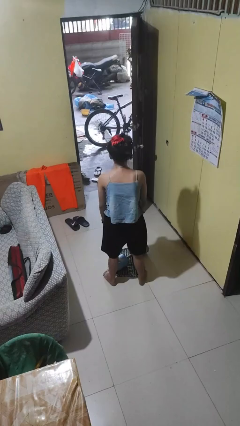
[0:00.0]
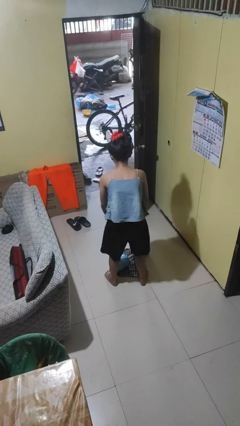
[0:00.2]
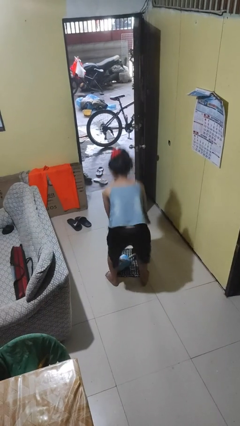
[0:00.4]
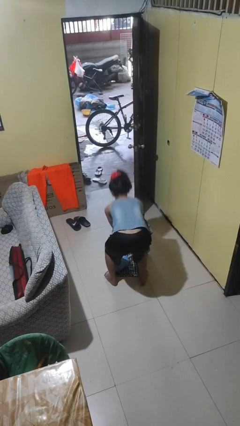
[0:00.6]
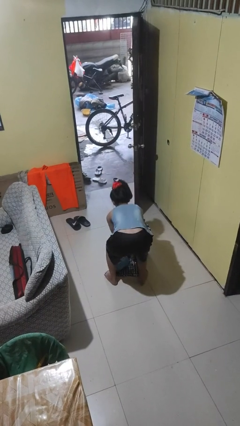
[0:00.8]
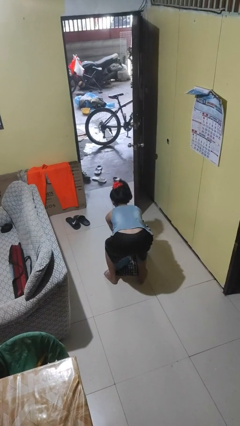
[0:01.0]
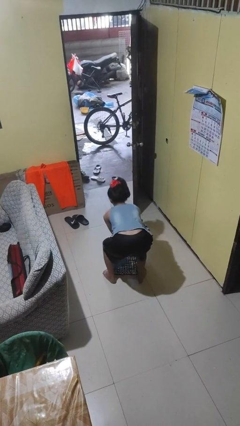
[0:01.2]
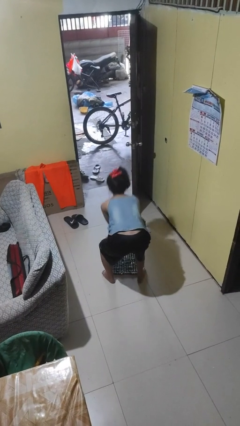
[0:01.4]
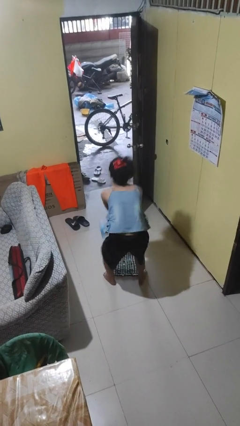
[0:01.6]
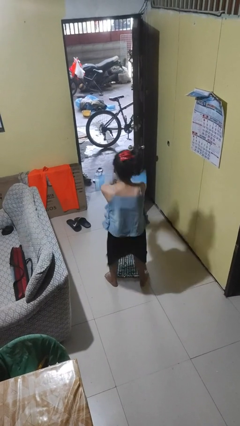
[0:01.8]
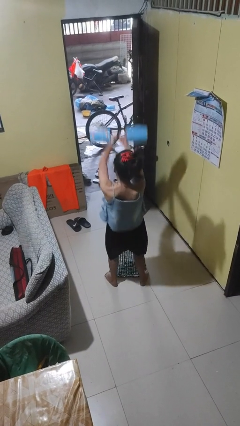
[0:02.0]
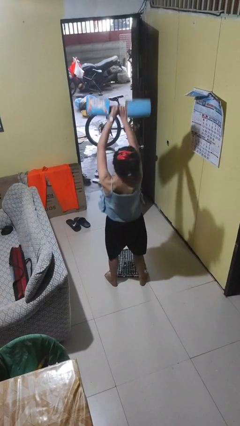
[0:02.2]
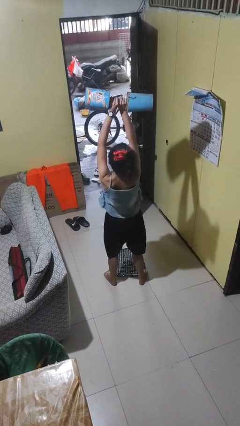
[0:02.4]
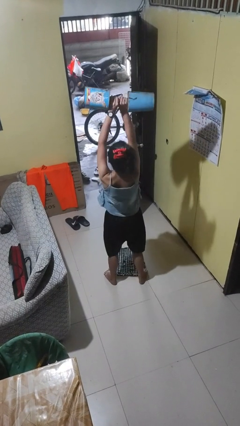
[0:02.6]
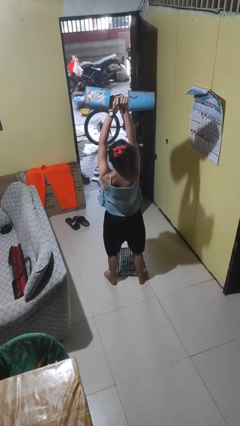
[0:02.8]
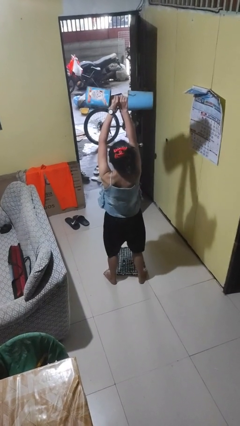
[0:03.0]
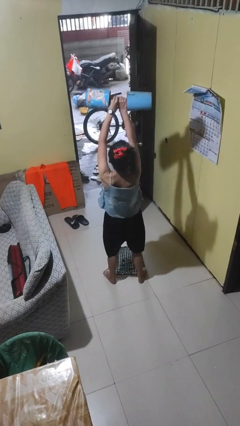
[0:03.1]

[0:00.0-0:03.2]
person lifts dumbbells

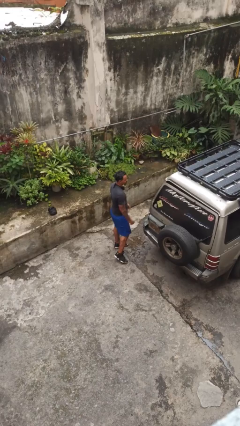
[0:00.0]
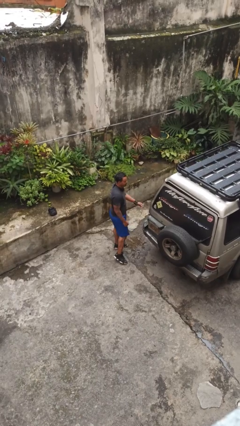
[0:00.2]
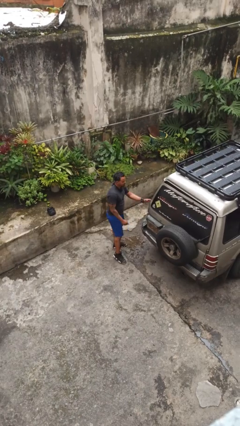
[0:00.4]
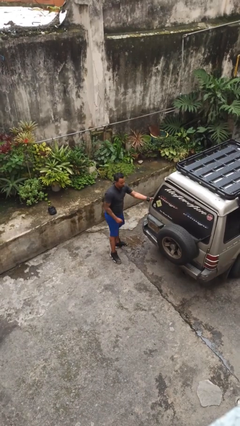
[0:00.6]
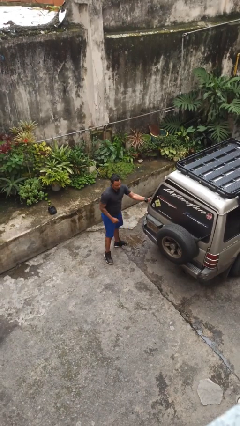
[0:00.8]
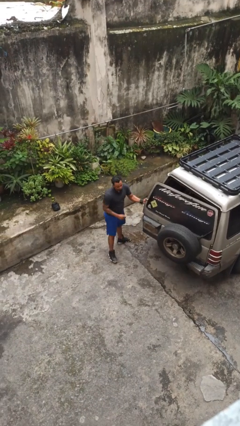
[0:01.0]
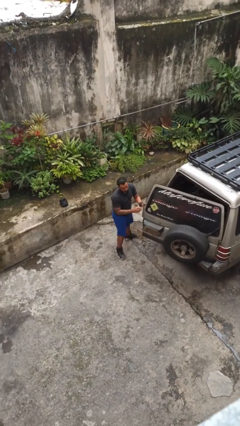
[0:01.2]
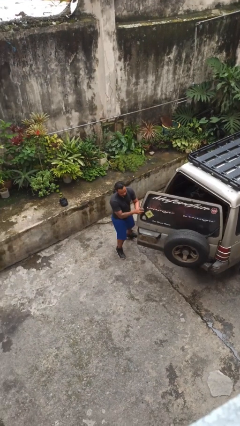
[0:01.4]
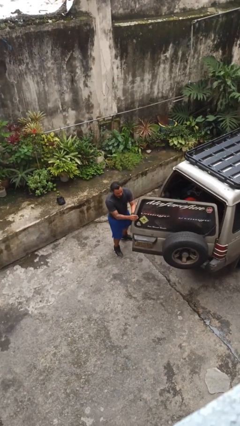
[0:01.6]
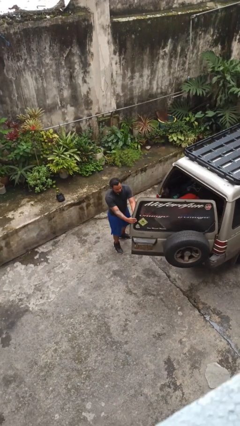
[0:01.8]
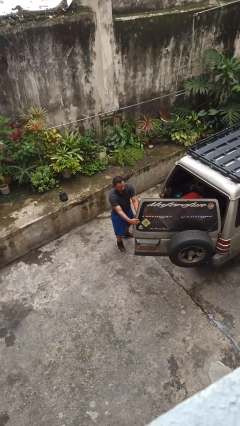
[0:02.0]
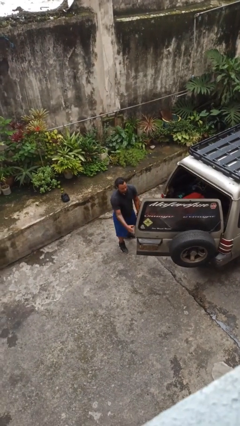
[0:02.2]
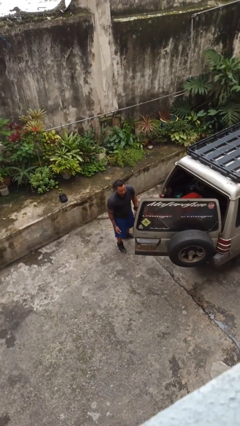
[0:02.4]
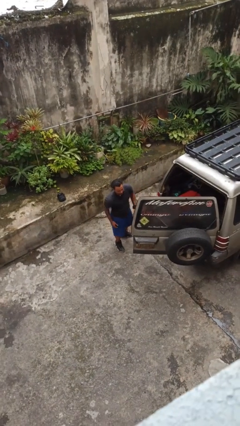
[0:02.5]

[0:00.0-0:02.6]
person opens car trunk

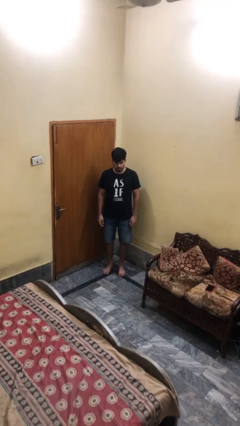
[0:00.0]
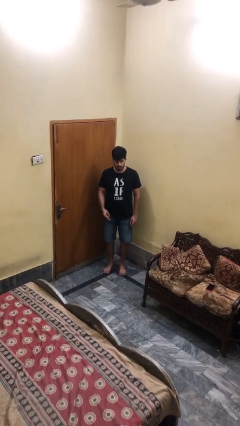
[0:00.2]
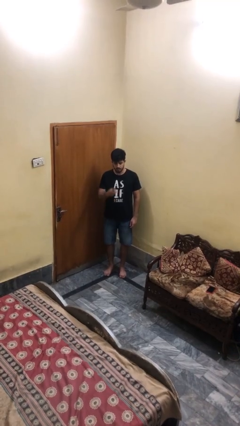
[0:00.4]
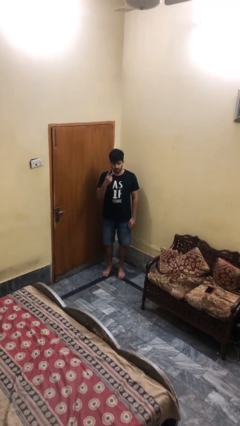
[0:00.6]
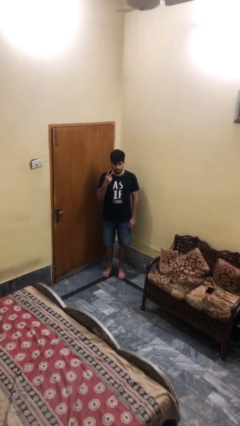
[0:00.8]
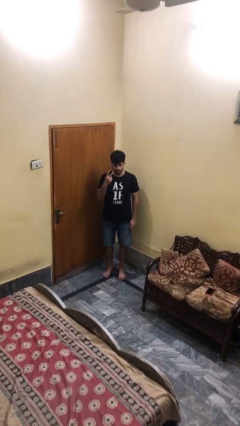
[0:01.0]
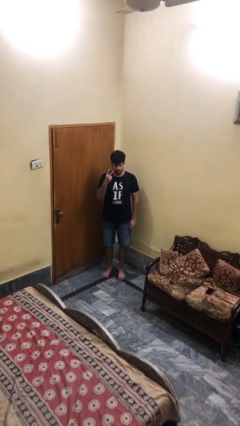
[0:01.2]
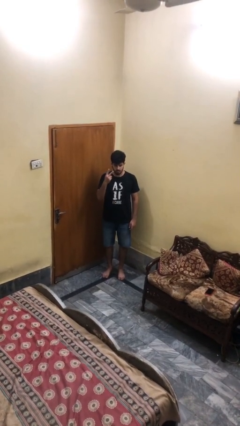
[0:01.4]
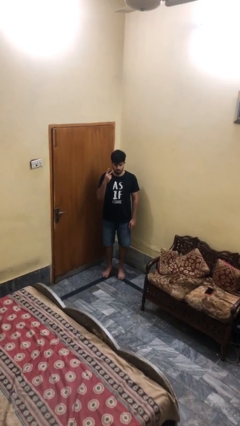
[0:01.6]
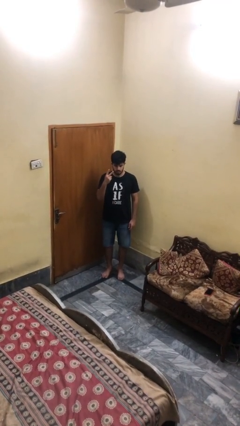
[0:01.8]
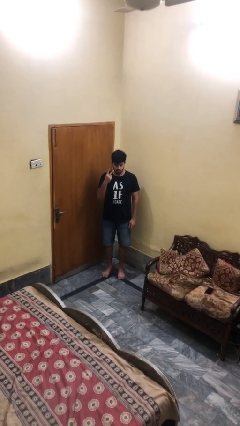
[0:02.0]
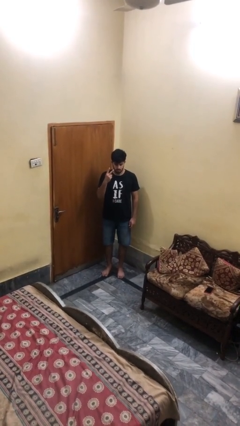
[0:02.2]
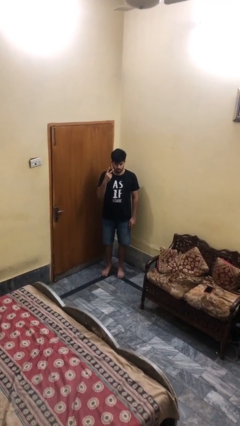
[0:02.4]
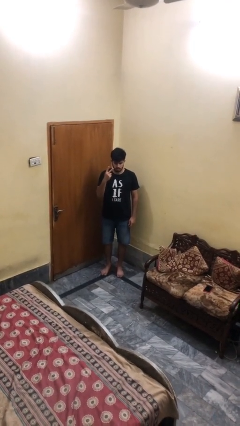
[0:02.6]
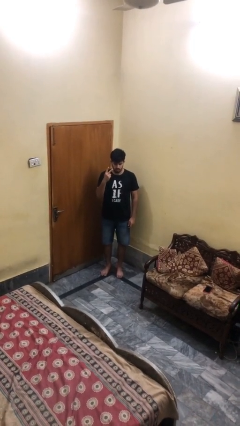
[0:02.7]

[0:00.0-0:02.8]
person gestures peace

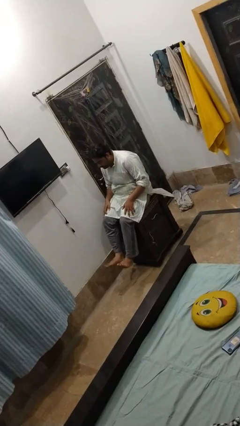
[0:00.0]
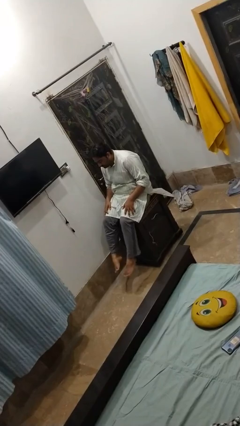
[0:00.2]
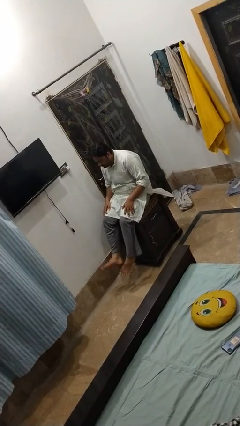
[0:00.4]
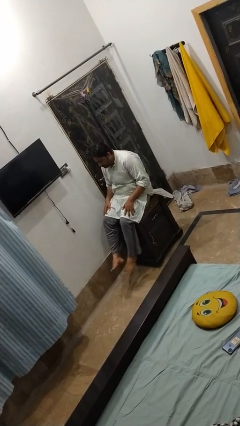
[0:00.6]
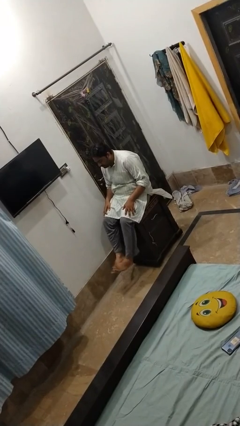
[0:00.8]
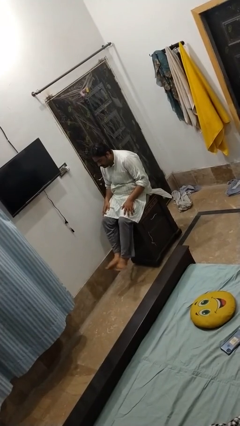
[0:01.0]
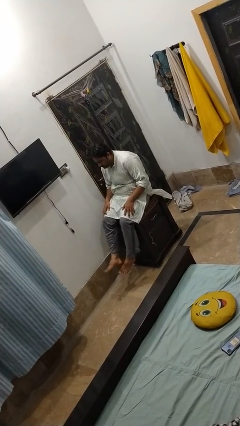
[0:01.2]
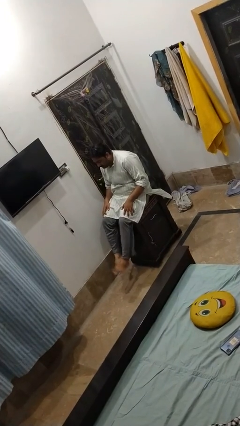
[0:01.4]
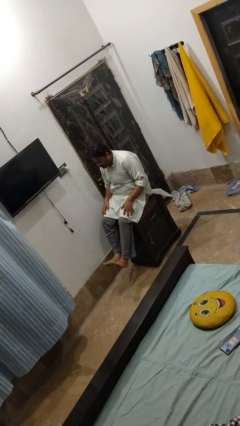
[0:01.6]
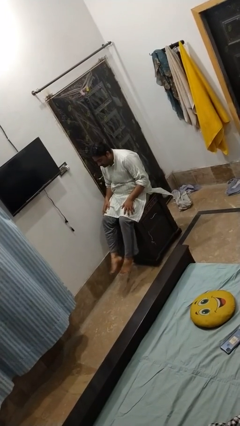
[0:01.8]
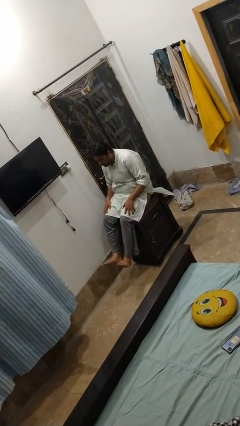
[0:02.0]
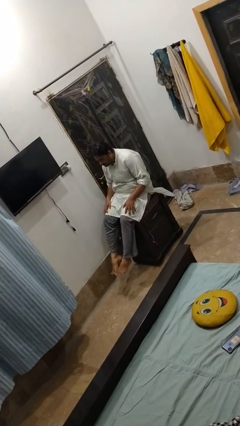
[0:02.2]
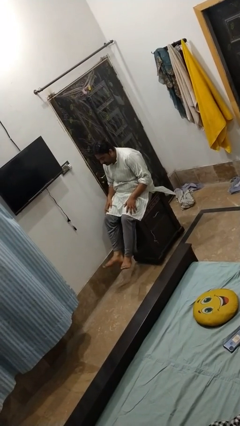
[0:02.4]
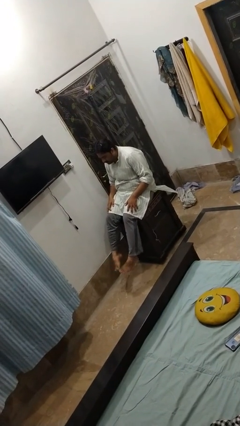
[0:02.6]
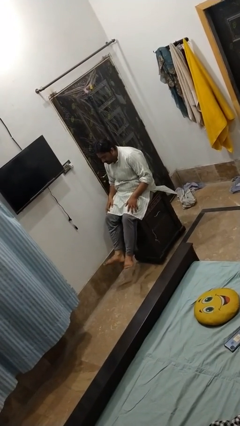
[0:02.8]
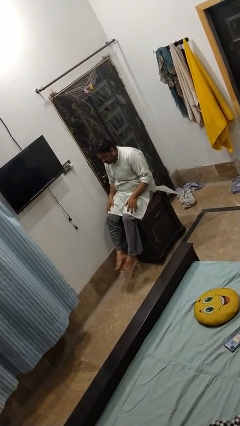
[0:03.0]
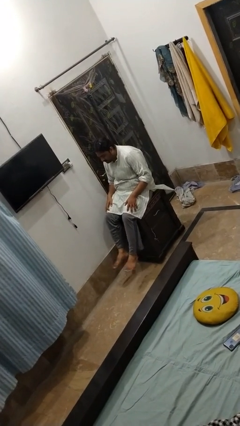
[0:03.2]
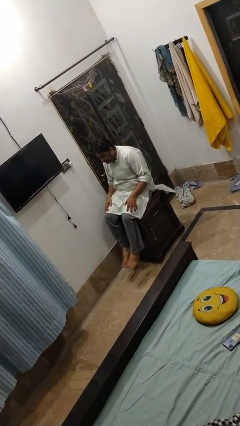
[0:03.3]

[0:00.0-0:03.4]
person twirls

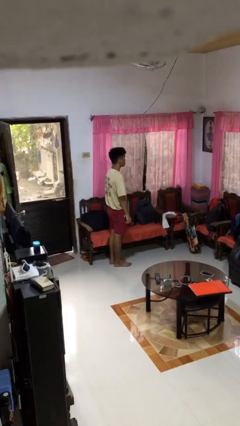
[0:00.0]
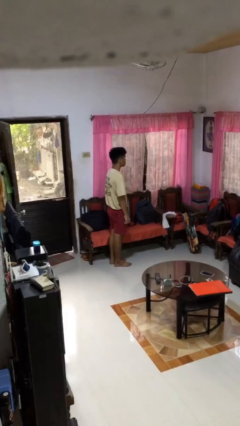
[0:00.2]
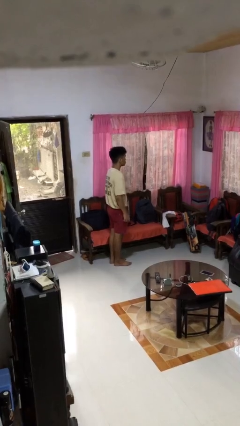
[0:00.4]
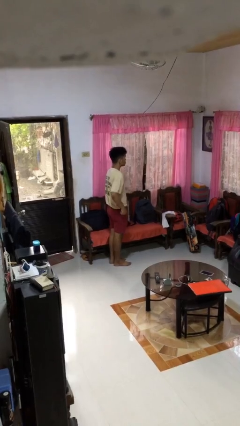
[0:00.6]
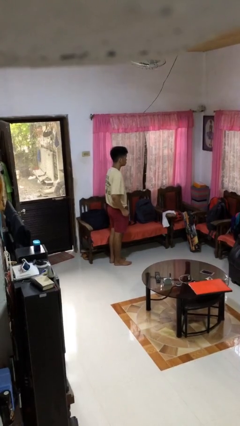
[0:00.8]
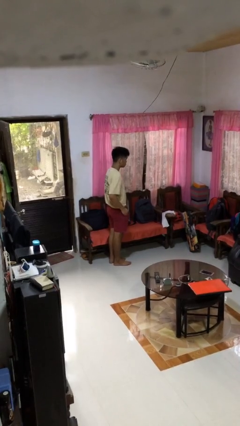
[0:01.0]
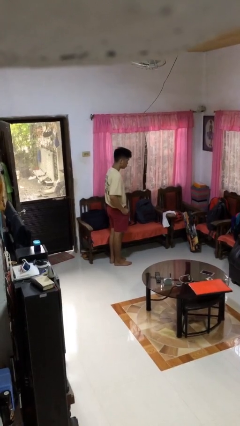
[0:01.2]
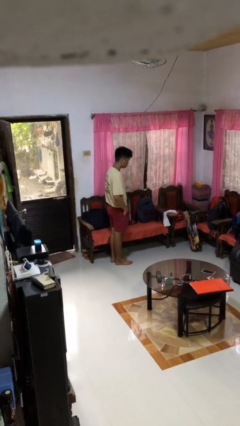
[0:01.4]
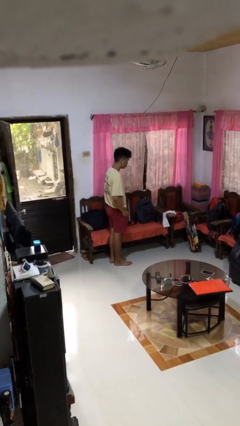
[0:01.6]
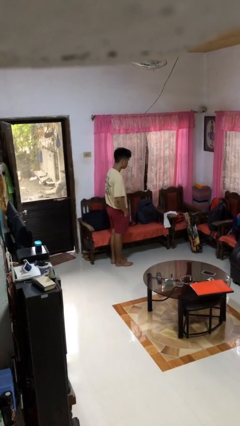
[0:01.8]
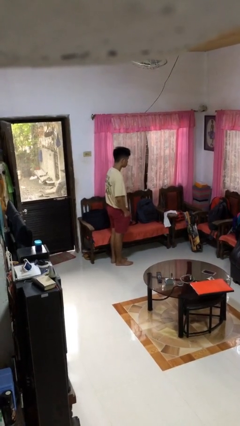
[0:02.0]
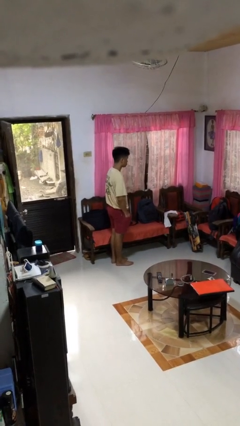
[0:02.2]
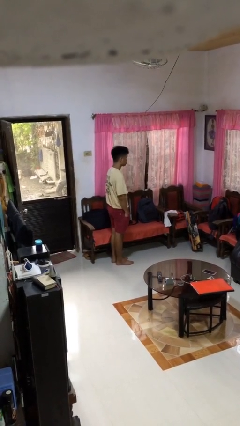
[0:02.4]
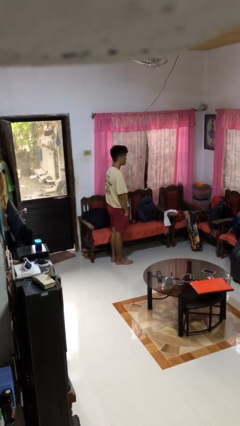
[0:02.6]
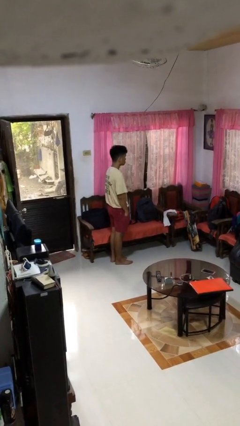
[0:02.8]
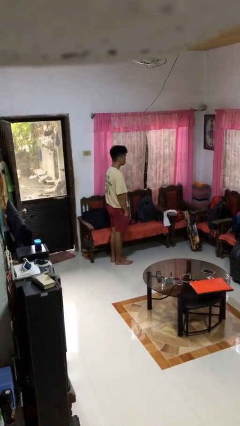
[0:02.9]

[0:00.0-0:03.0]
person puts hands in back pockets

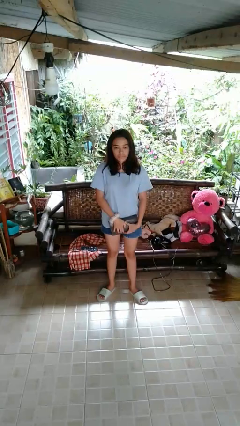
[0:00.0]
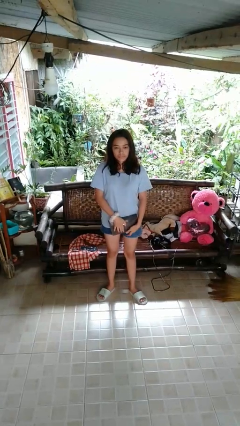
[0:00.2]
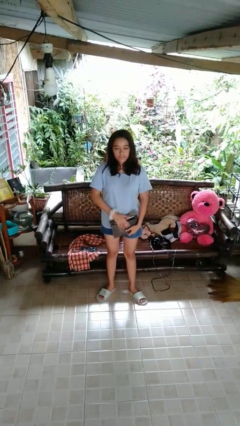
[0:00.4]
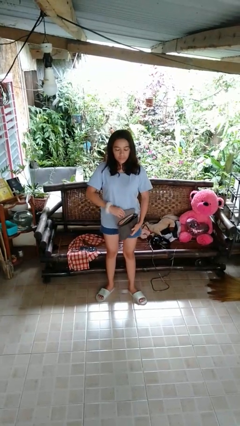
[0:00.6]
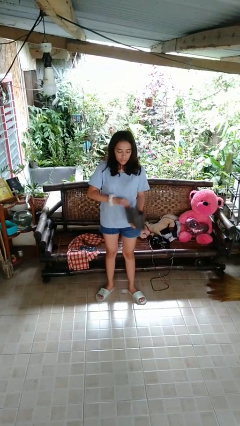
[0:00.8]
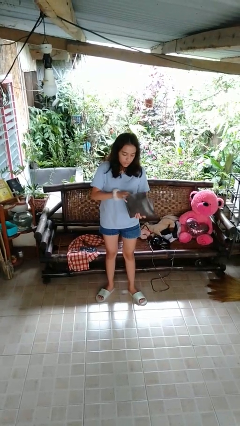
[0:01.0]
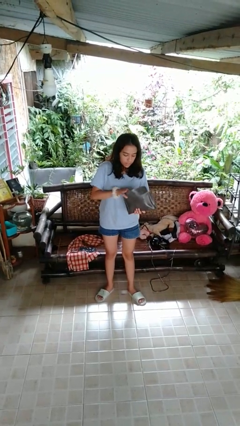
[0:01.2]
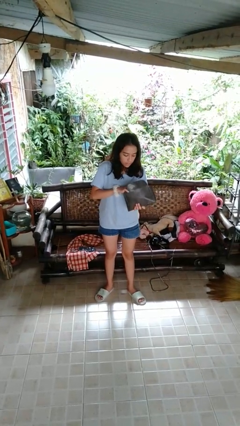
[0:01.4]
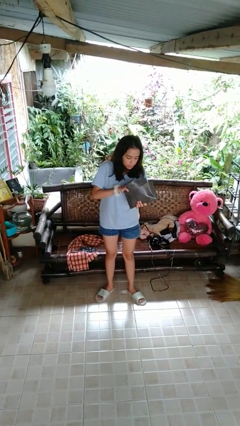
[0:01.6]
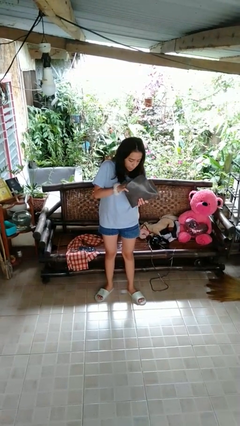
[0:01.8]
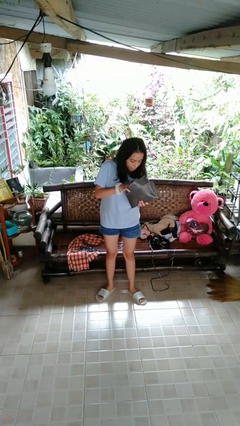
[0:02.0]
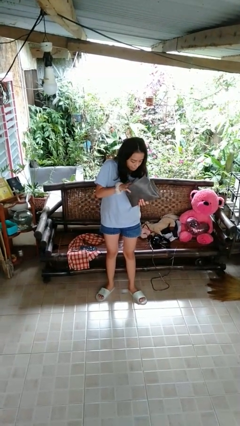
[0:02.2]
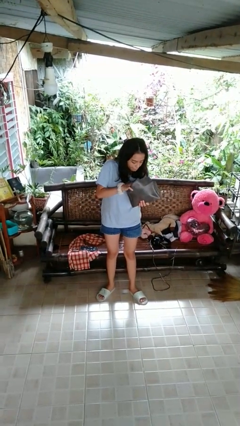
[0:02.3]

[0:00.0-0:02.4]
person searches in purse
